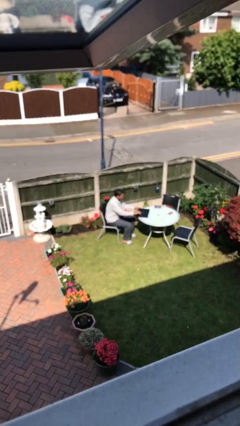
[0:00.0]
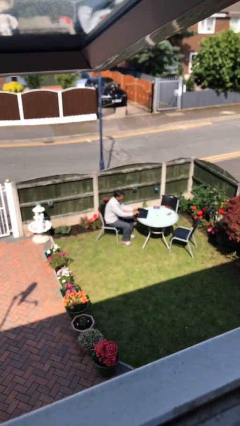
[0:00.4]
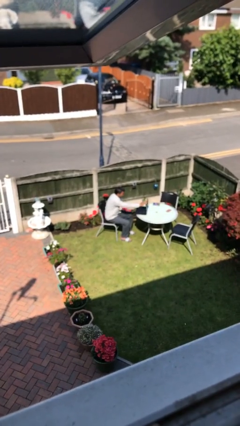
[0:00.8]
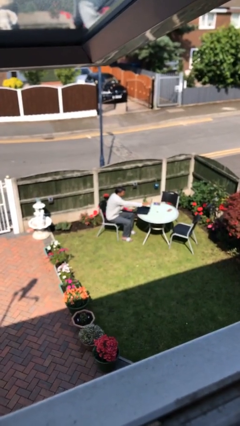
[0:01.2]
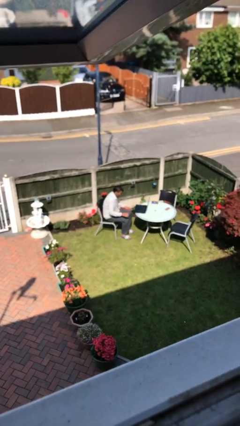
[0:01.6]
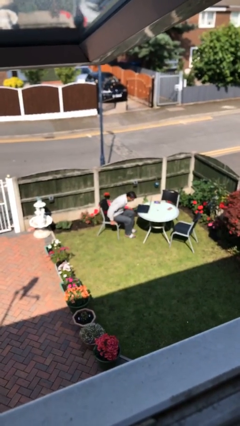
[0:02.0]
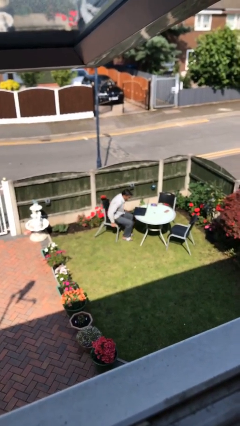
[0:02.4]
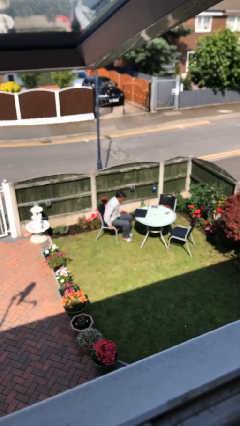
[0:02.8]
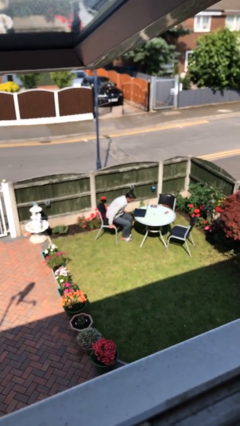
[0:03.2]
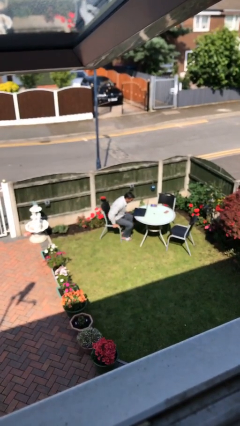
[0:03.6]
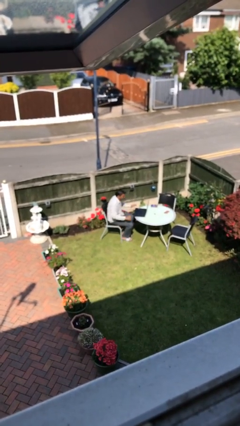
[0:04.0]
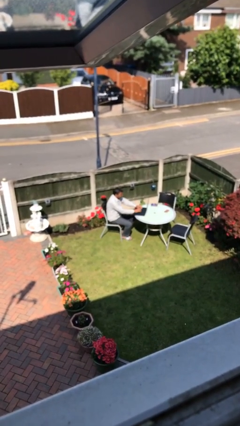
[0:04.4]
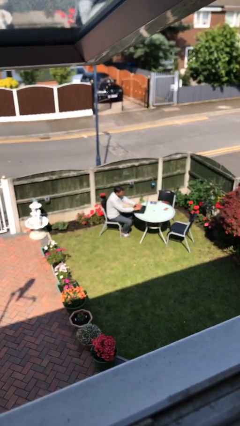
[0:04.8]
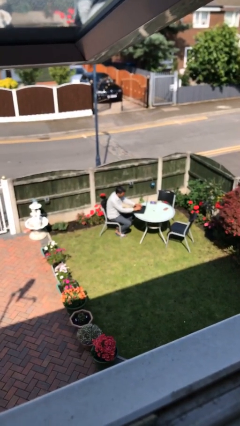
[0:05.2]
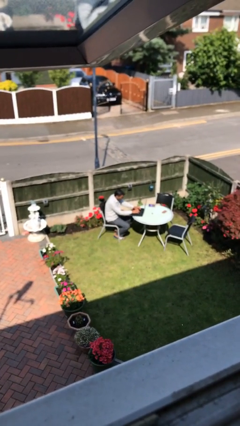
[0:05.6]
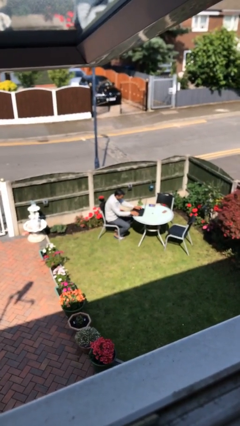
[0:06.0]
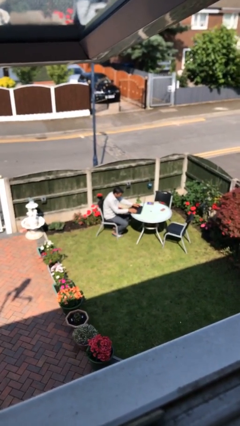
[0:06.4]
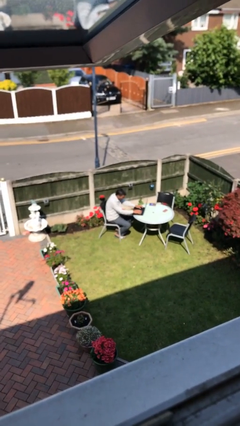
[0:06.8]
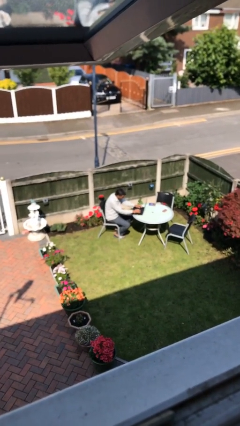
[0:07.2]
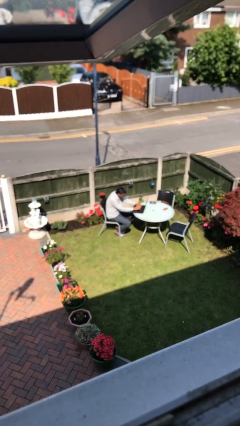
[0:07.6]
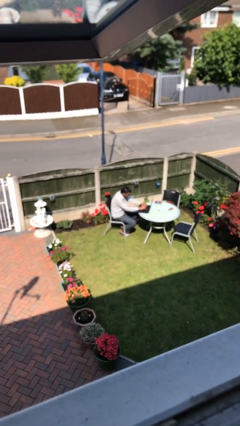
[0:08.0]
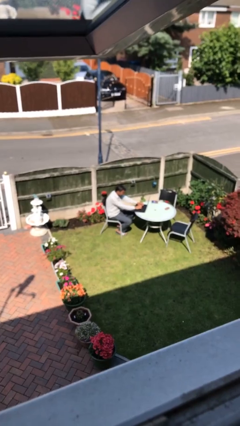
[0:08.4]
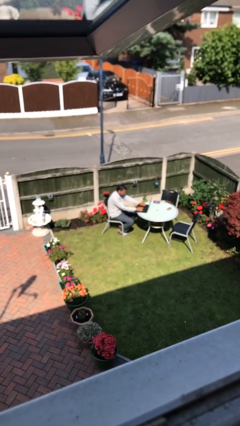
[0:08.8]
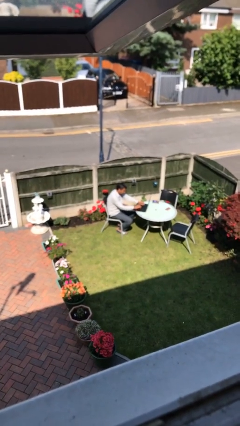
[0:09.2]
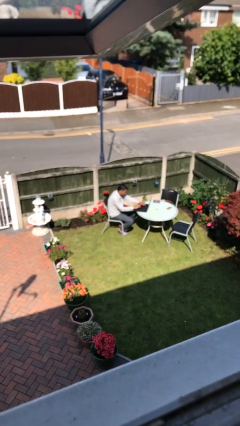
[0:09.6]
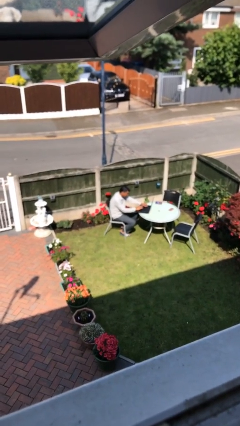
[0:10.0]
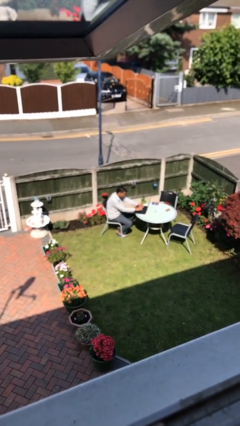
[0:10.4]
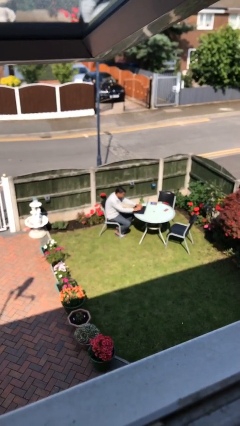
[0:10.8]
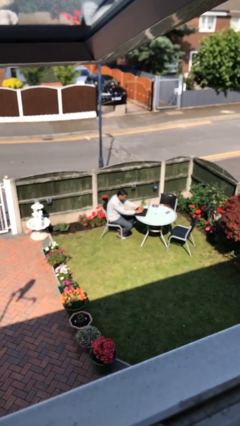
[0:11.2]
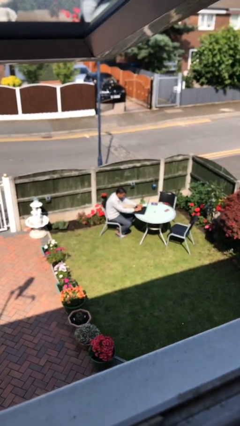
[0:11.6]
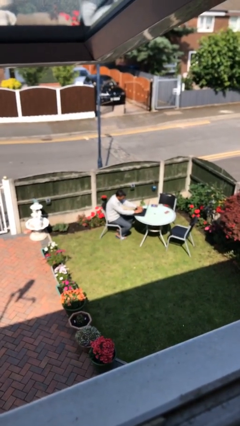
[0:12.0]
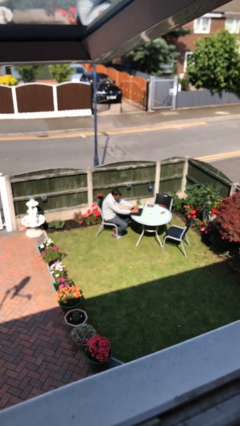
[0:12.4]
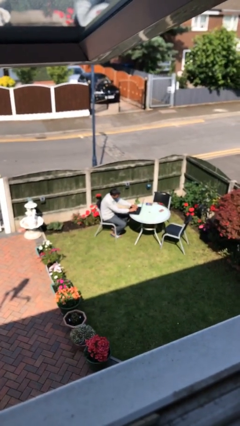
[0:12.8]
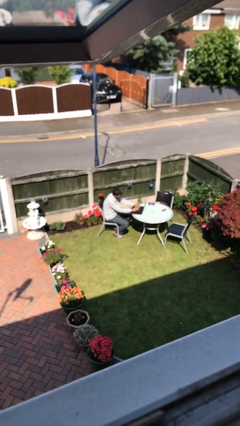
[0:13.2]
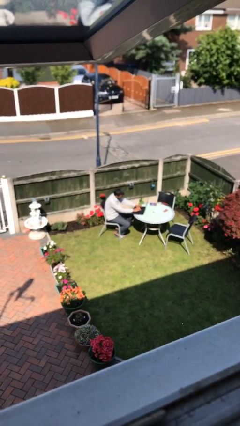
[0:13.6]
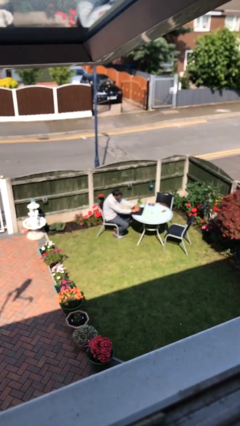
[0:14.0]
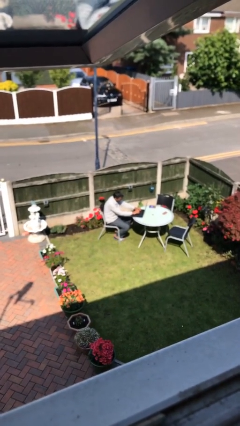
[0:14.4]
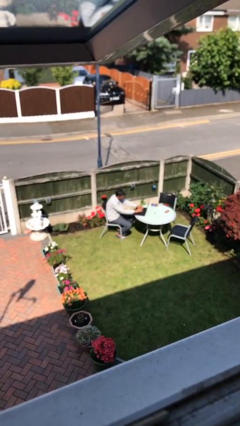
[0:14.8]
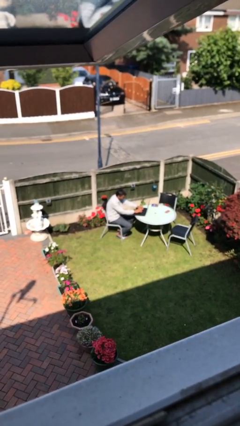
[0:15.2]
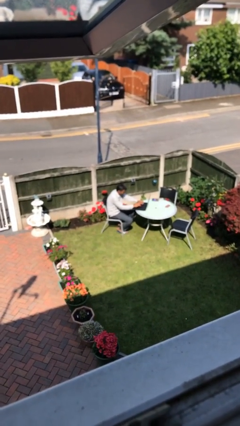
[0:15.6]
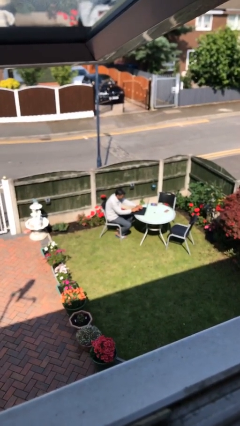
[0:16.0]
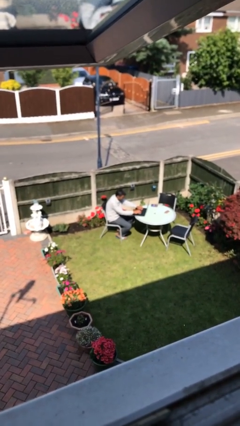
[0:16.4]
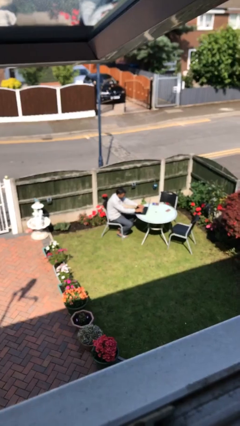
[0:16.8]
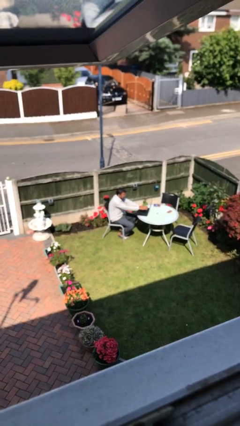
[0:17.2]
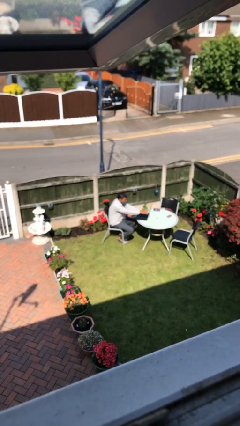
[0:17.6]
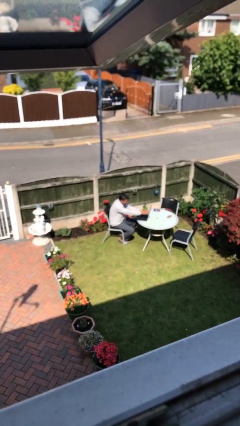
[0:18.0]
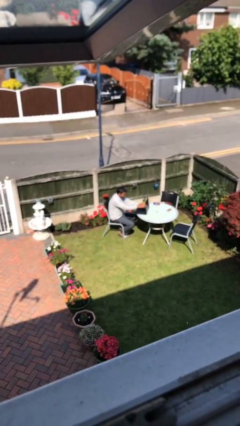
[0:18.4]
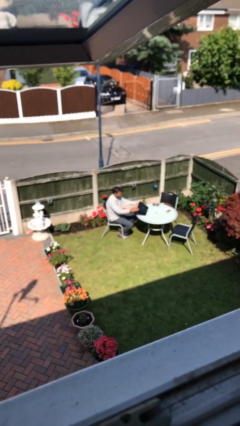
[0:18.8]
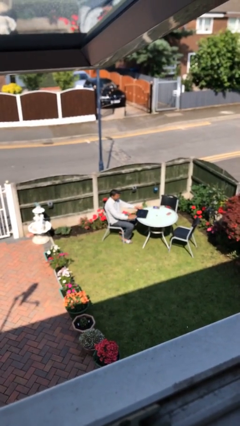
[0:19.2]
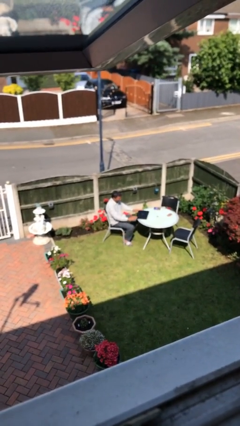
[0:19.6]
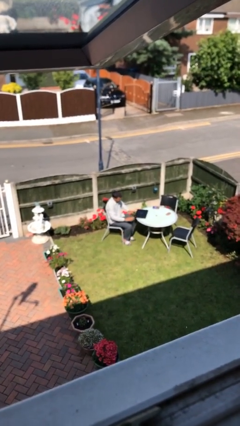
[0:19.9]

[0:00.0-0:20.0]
person interacts with laptop

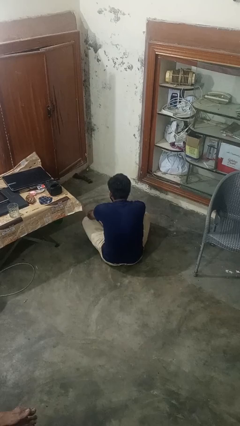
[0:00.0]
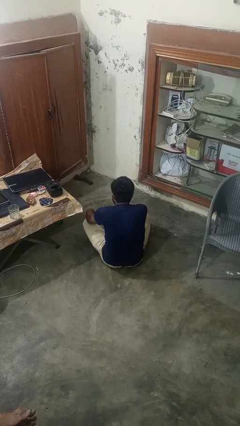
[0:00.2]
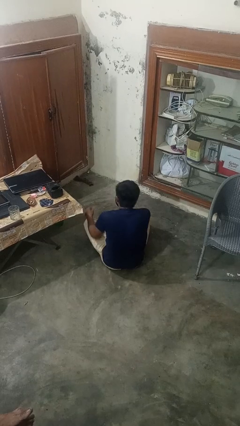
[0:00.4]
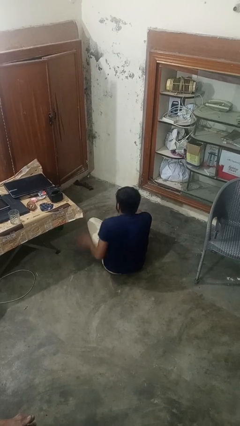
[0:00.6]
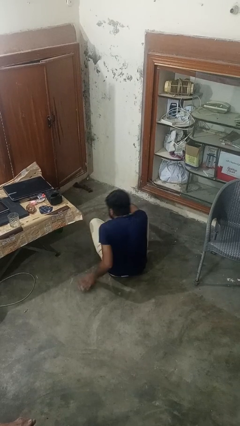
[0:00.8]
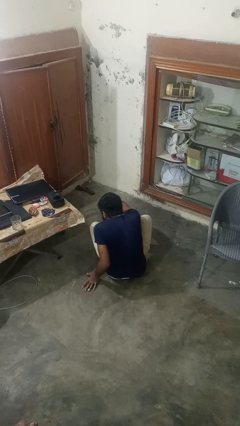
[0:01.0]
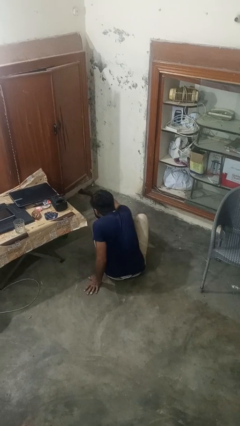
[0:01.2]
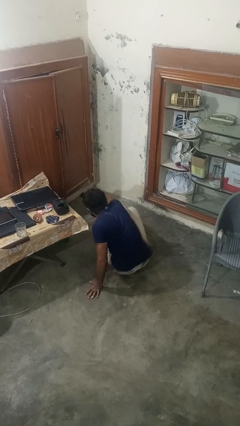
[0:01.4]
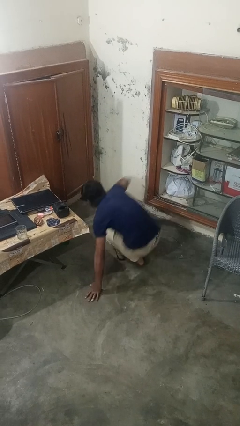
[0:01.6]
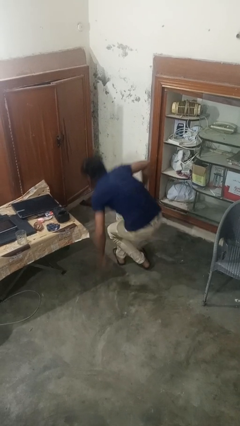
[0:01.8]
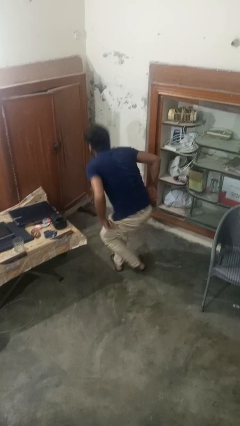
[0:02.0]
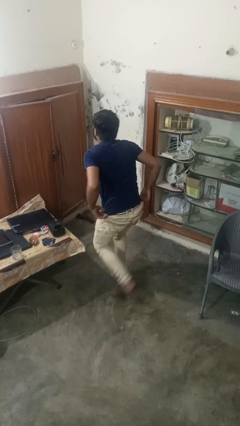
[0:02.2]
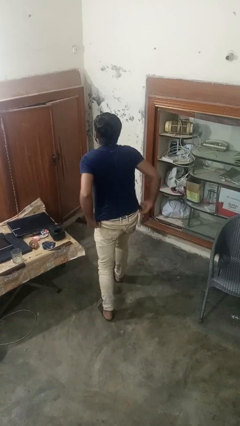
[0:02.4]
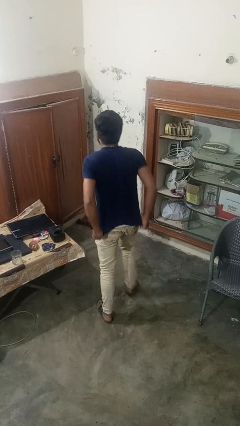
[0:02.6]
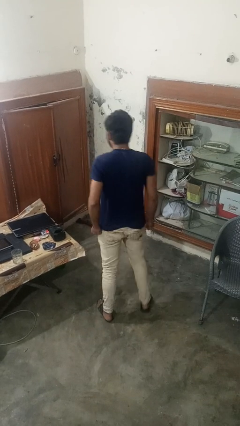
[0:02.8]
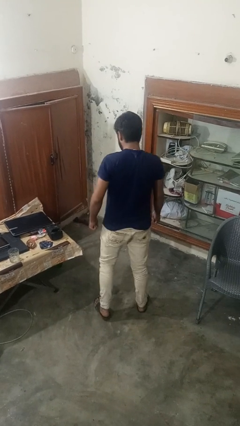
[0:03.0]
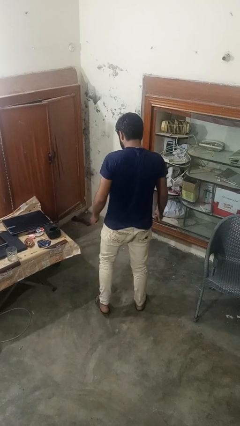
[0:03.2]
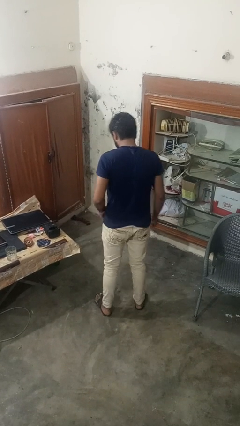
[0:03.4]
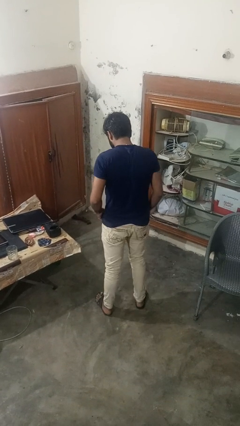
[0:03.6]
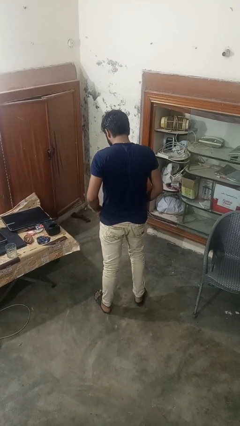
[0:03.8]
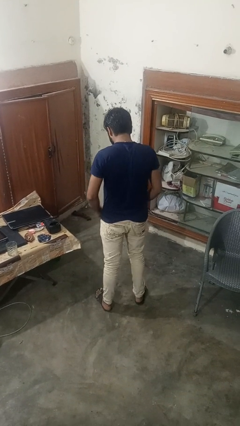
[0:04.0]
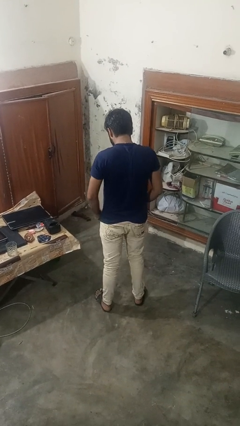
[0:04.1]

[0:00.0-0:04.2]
person stands up from floor

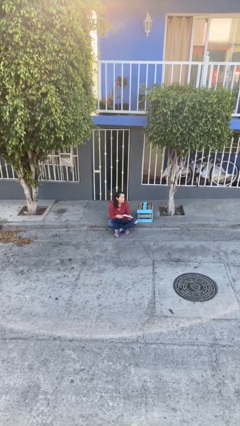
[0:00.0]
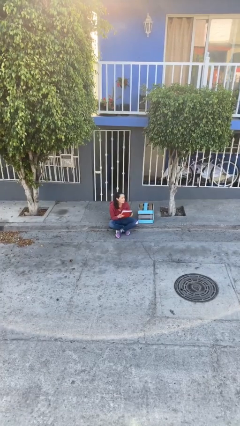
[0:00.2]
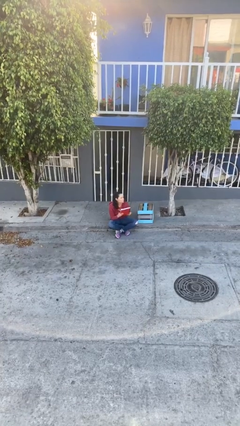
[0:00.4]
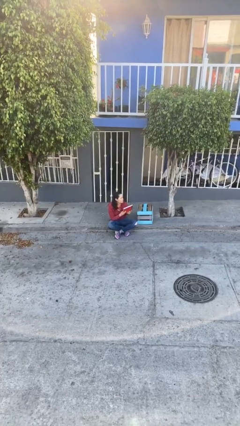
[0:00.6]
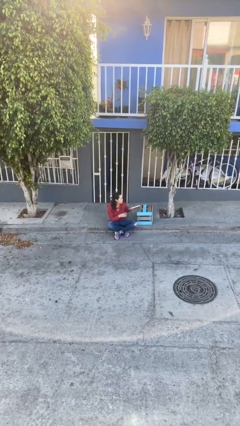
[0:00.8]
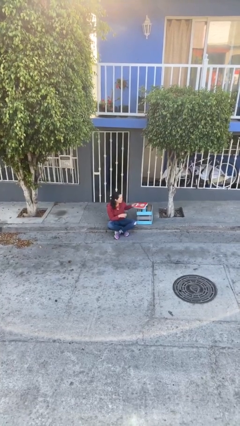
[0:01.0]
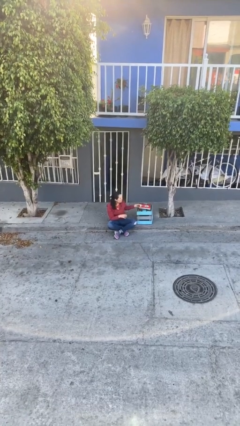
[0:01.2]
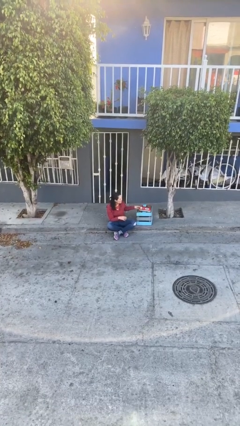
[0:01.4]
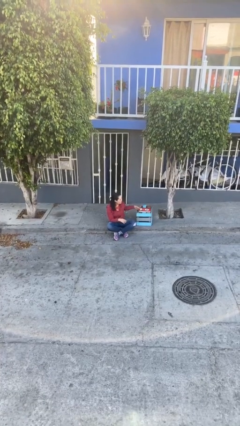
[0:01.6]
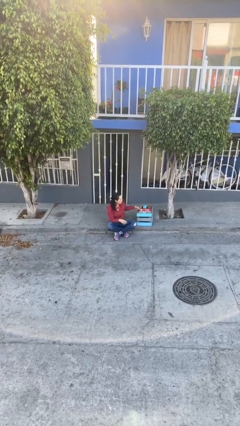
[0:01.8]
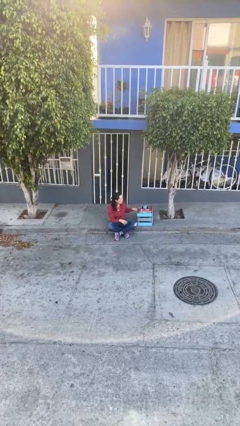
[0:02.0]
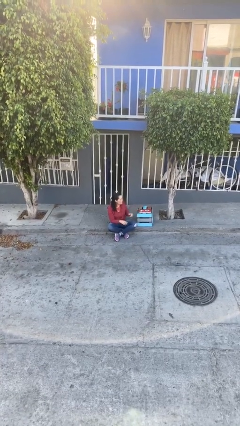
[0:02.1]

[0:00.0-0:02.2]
person puts down object on table

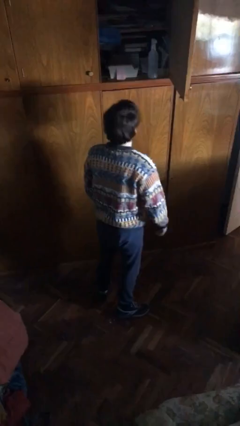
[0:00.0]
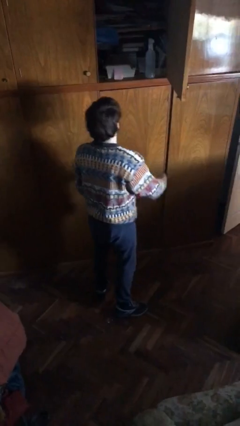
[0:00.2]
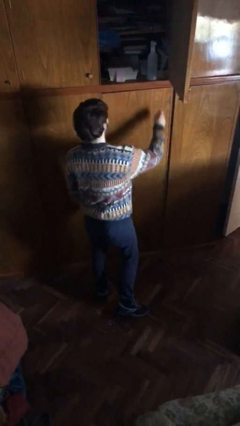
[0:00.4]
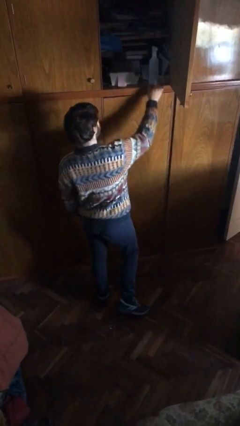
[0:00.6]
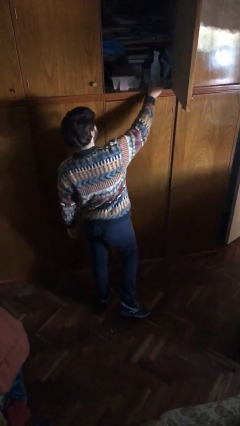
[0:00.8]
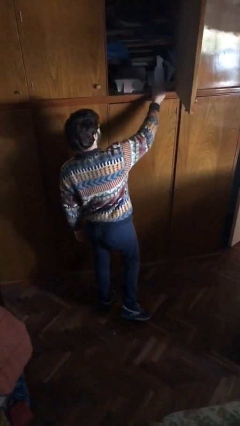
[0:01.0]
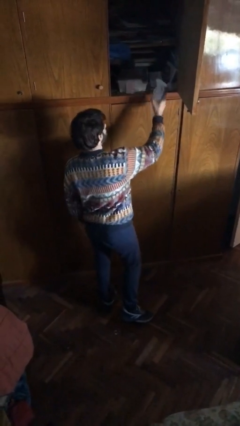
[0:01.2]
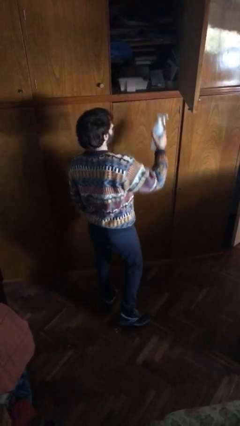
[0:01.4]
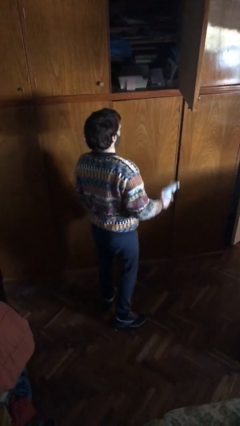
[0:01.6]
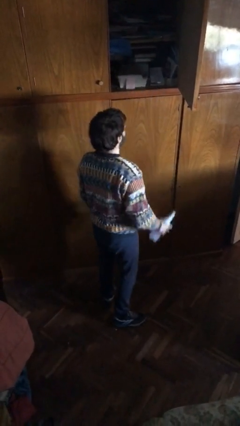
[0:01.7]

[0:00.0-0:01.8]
person picks up object from cabinet
